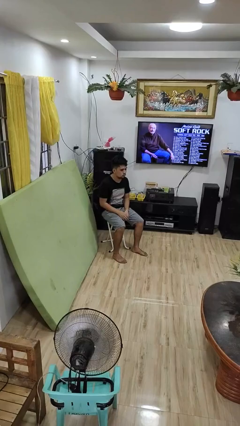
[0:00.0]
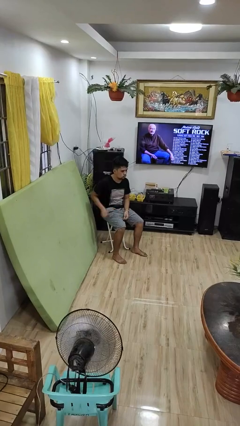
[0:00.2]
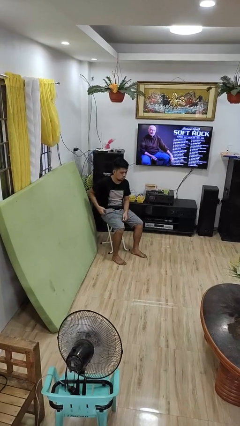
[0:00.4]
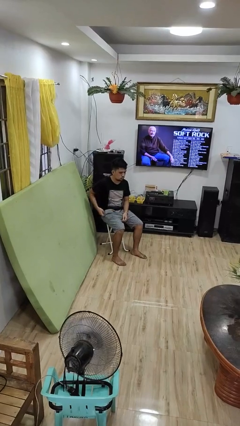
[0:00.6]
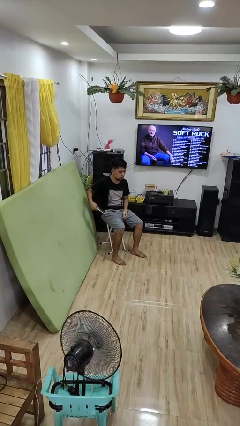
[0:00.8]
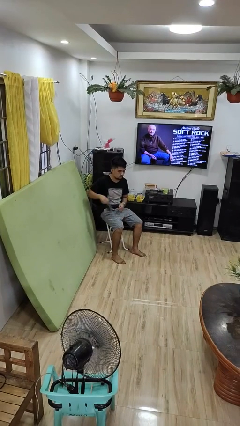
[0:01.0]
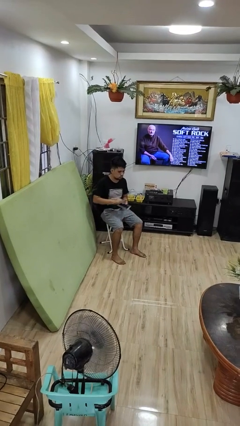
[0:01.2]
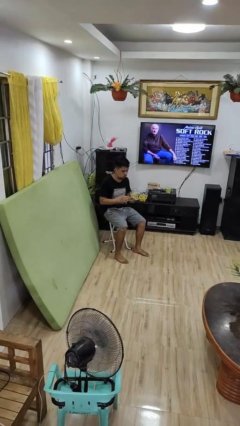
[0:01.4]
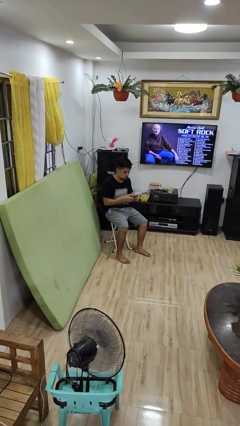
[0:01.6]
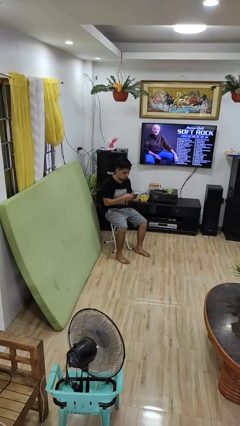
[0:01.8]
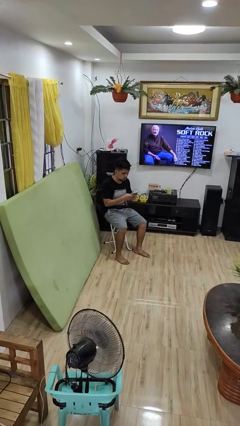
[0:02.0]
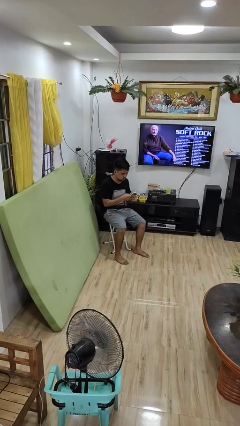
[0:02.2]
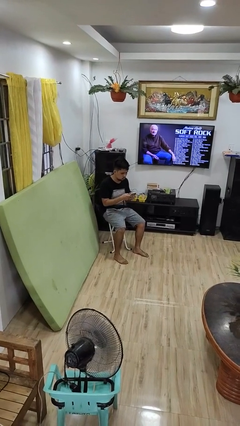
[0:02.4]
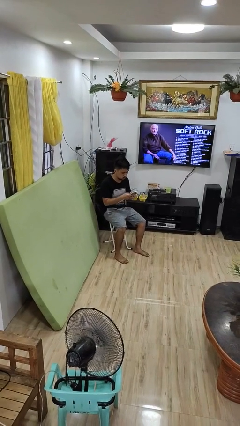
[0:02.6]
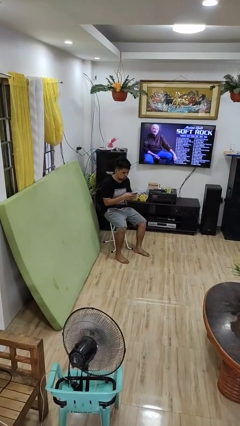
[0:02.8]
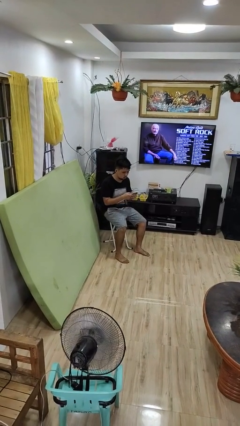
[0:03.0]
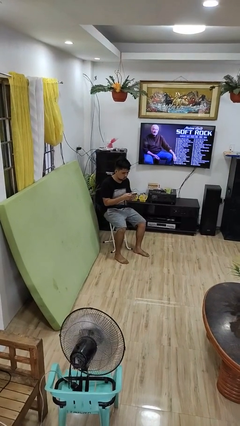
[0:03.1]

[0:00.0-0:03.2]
person takes phone from pocket

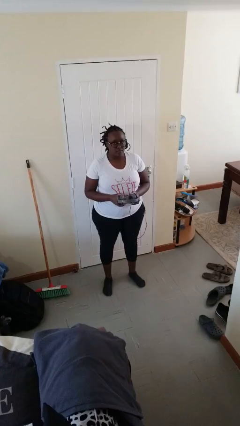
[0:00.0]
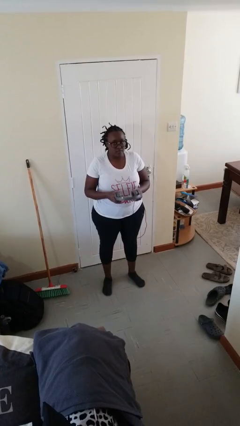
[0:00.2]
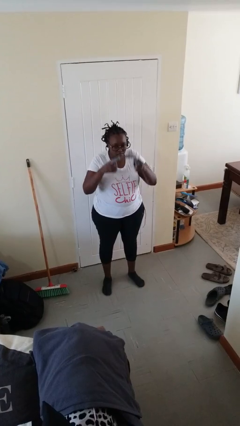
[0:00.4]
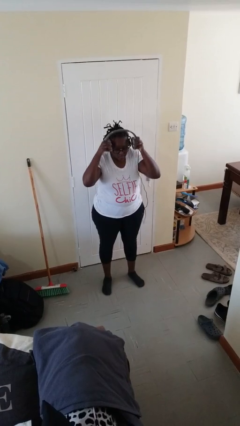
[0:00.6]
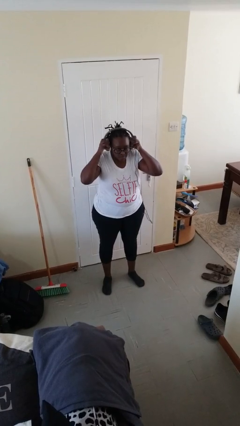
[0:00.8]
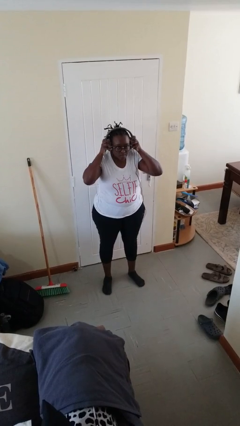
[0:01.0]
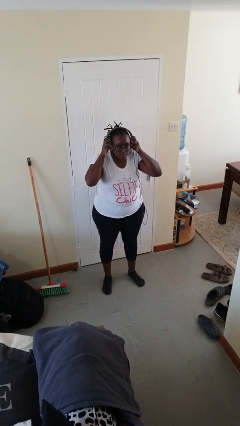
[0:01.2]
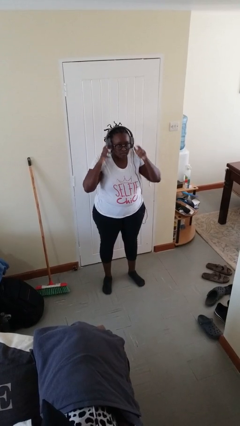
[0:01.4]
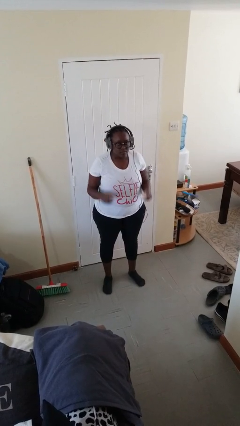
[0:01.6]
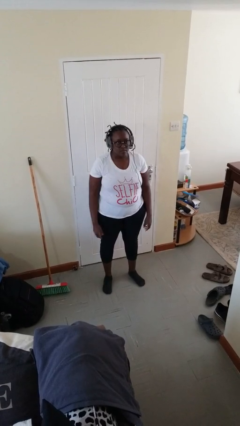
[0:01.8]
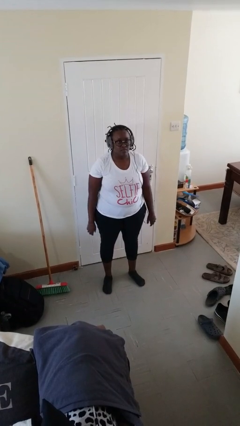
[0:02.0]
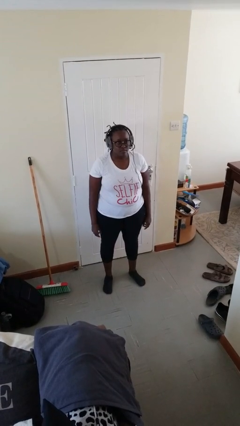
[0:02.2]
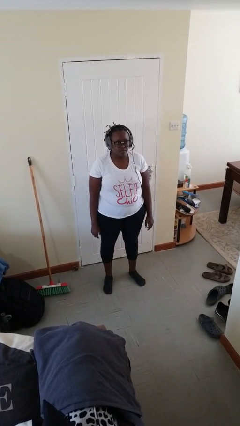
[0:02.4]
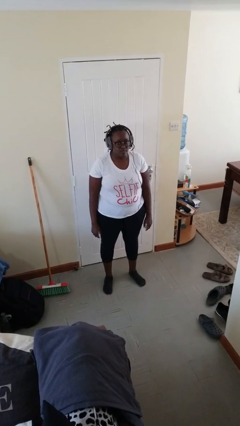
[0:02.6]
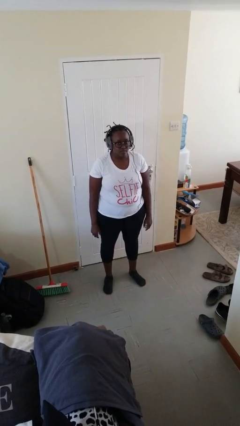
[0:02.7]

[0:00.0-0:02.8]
person puts on headphones

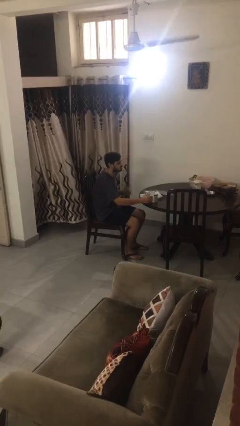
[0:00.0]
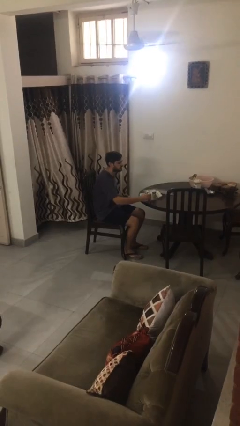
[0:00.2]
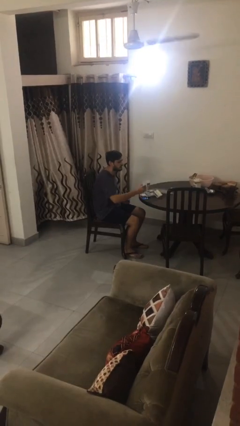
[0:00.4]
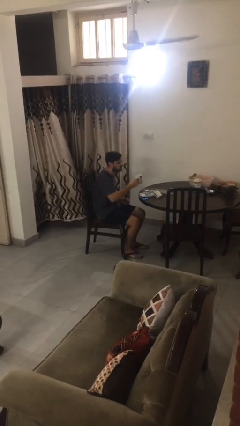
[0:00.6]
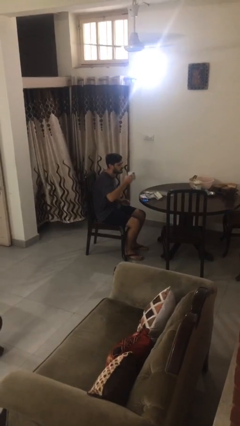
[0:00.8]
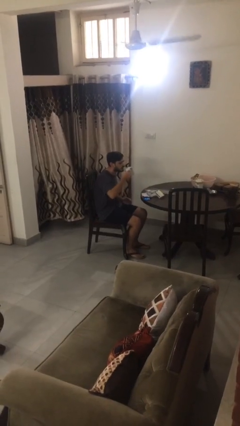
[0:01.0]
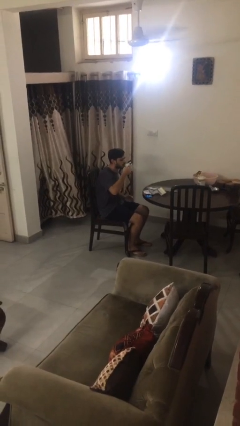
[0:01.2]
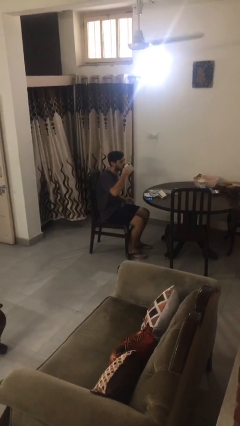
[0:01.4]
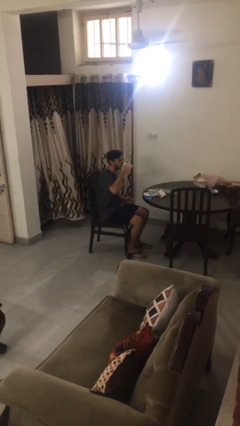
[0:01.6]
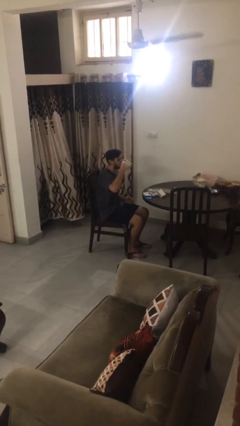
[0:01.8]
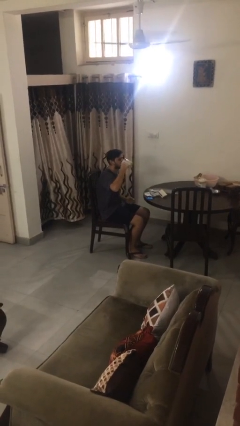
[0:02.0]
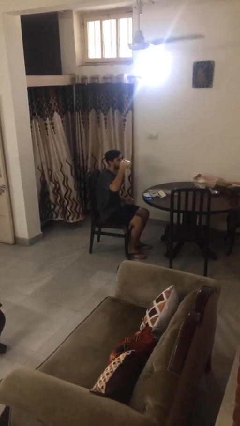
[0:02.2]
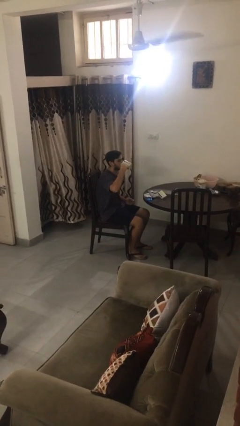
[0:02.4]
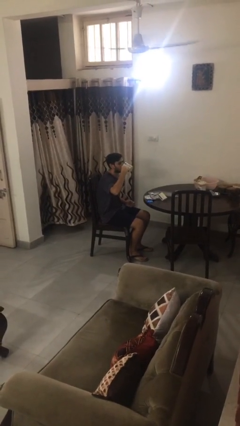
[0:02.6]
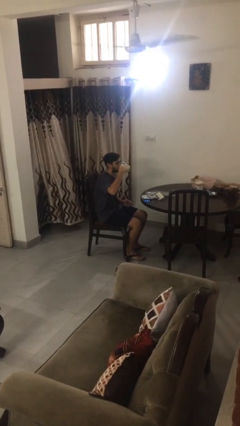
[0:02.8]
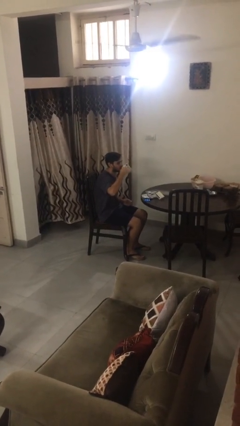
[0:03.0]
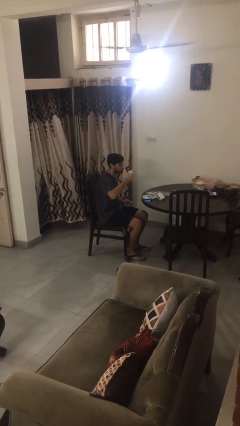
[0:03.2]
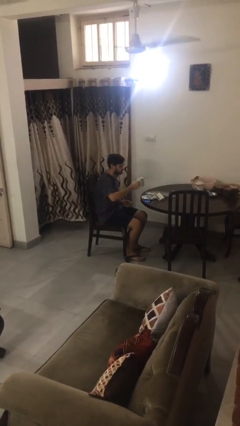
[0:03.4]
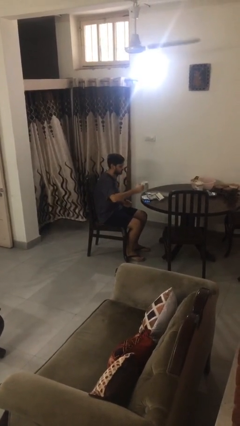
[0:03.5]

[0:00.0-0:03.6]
person drinks from cup

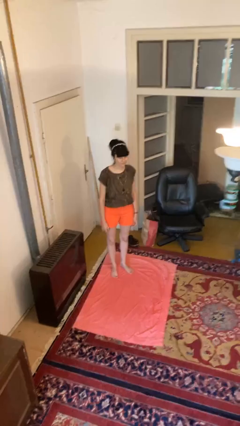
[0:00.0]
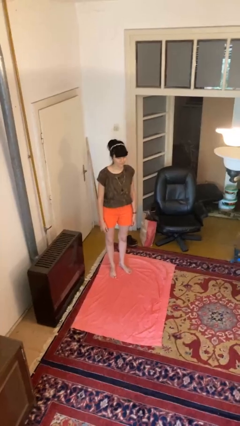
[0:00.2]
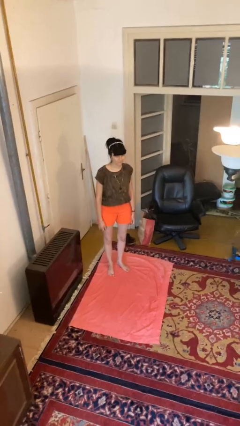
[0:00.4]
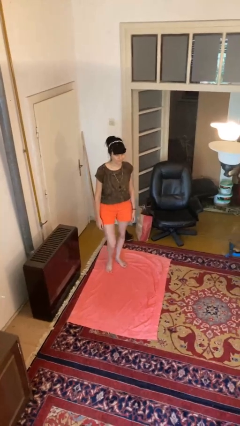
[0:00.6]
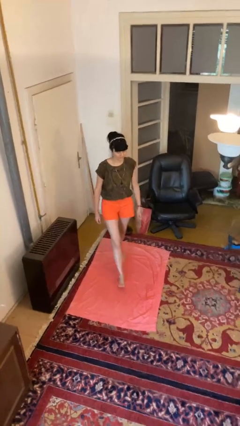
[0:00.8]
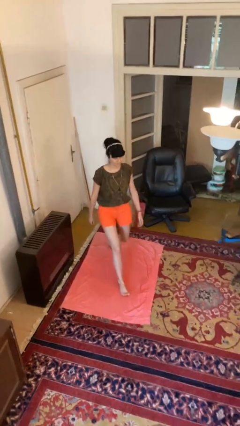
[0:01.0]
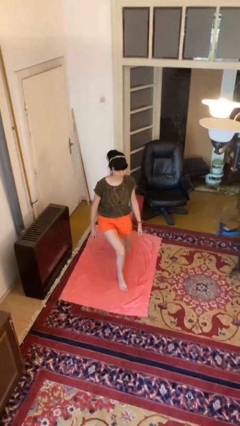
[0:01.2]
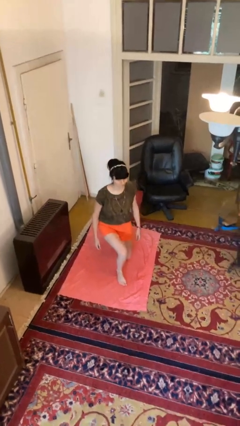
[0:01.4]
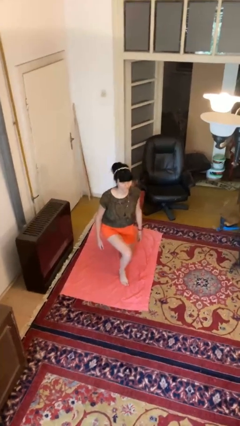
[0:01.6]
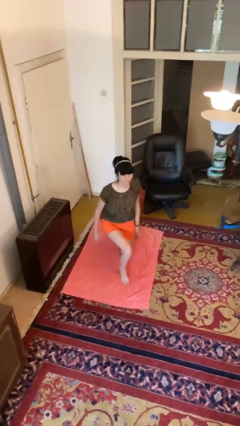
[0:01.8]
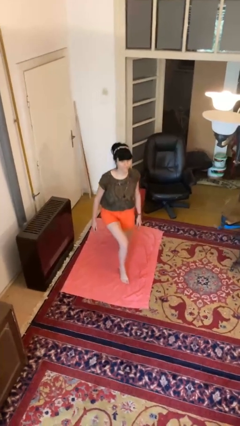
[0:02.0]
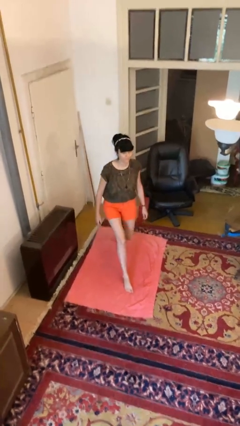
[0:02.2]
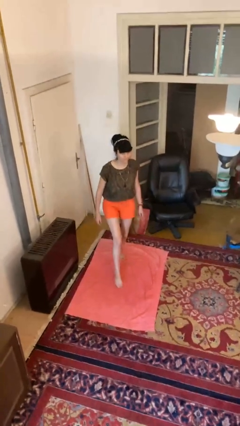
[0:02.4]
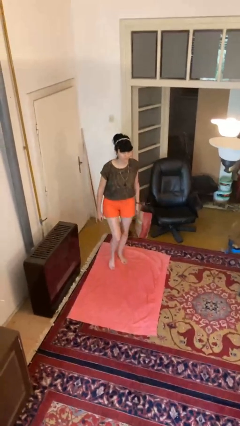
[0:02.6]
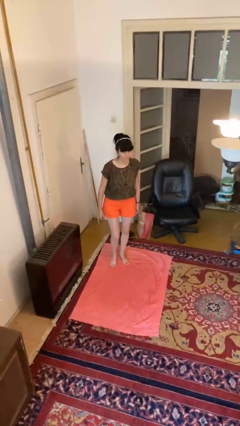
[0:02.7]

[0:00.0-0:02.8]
person exercises with lunges

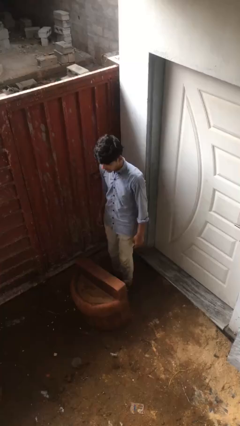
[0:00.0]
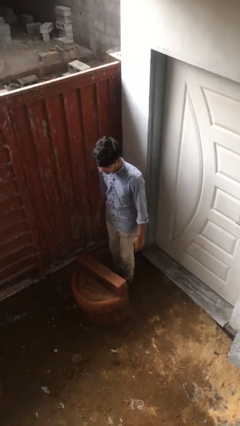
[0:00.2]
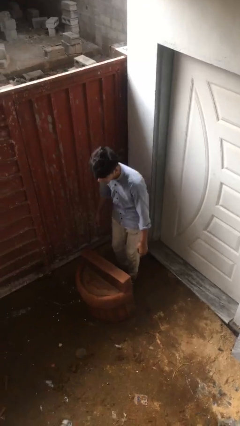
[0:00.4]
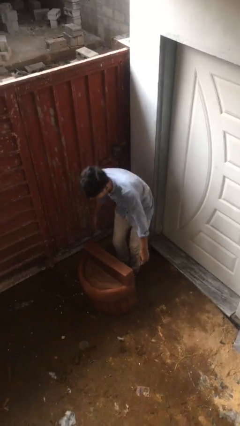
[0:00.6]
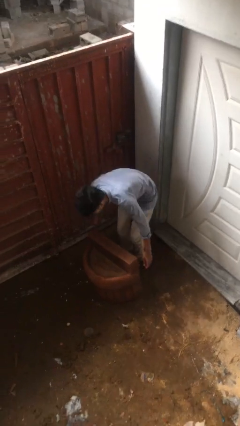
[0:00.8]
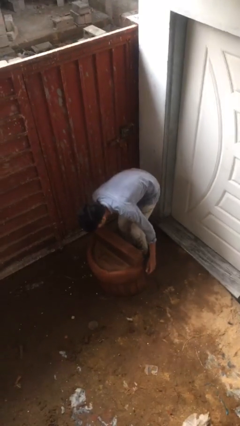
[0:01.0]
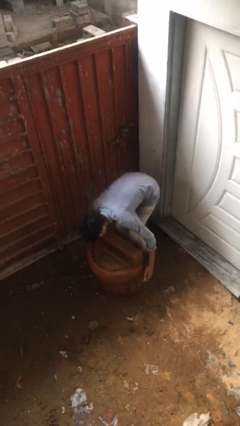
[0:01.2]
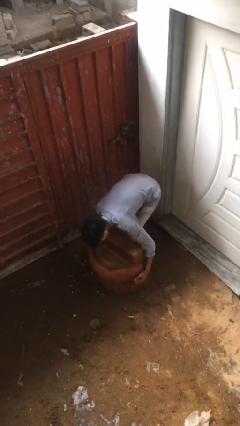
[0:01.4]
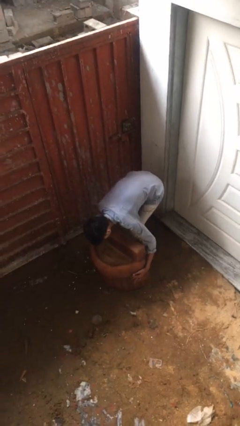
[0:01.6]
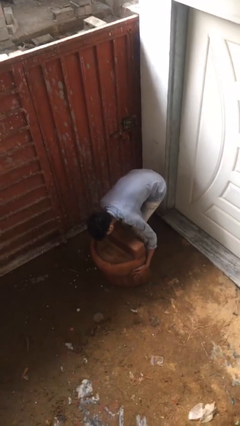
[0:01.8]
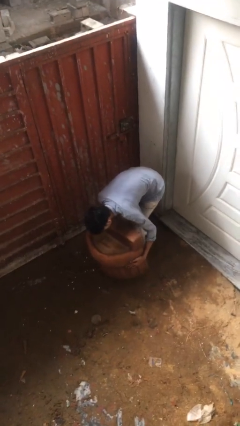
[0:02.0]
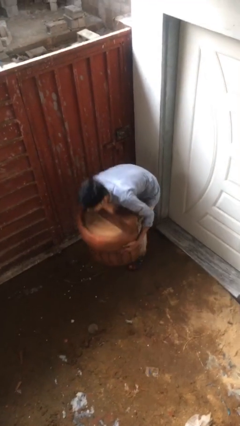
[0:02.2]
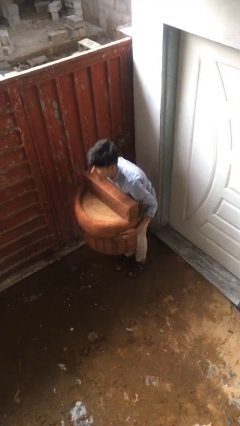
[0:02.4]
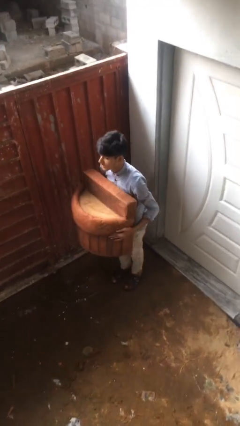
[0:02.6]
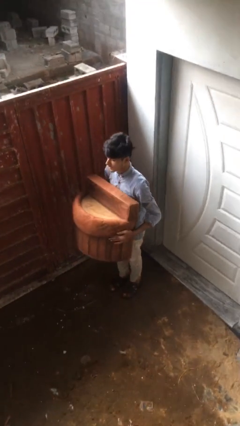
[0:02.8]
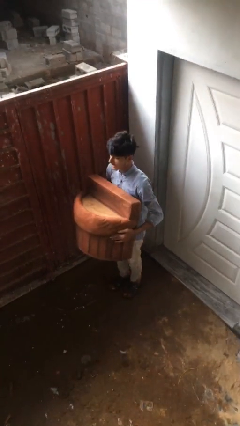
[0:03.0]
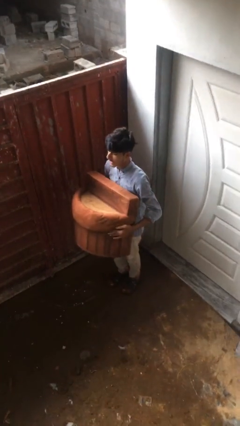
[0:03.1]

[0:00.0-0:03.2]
person picks up object from floor

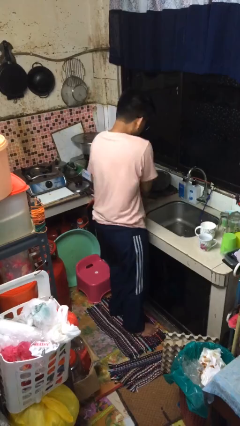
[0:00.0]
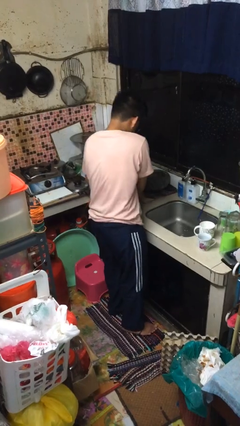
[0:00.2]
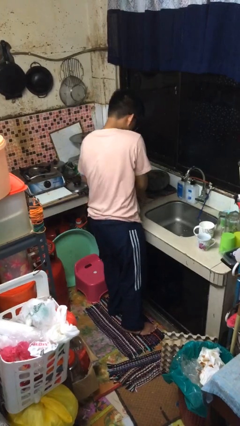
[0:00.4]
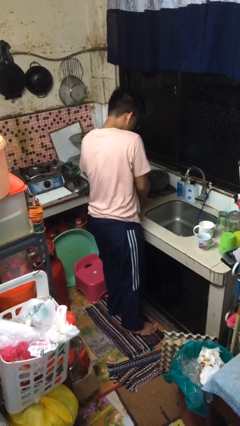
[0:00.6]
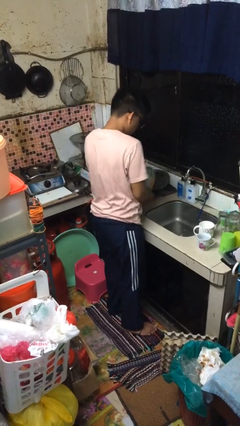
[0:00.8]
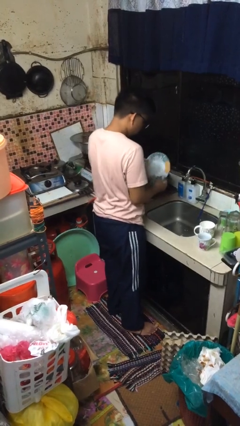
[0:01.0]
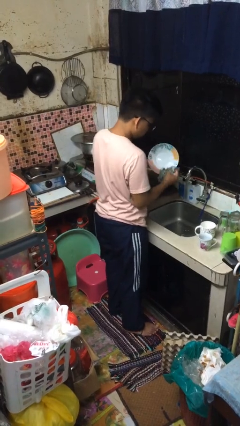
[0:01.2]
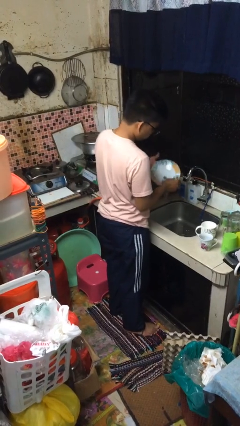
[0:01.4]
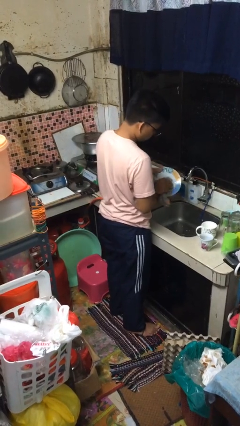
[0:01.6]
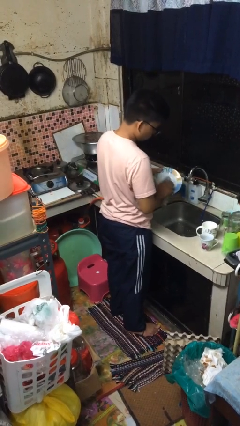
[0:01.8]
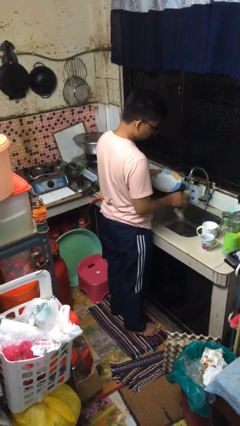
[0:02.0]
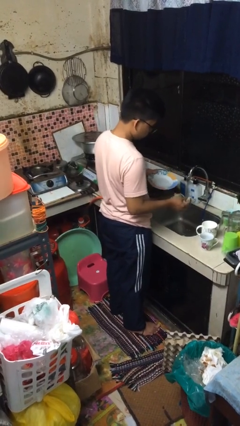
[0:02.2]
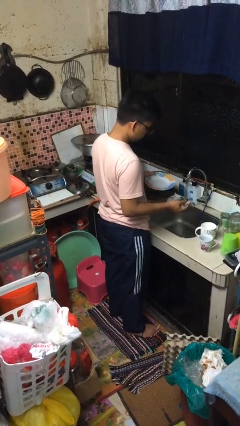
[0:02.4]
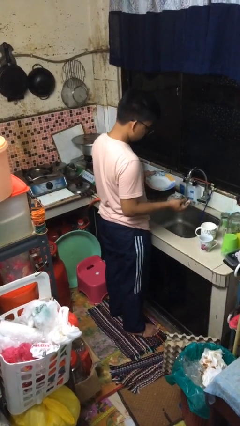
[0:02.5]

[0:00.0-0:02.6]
person dries dish
